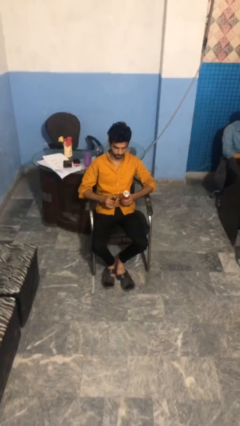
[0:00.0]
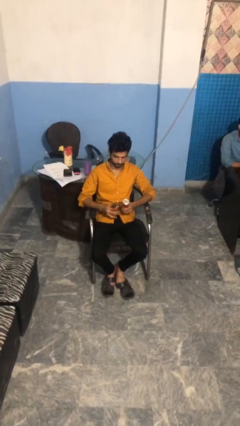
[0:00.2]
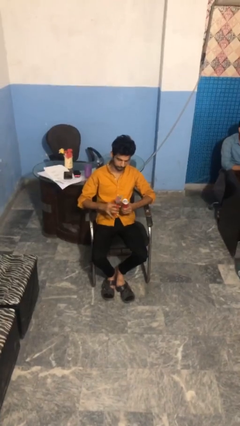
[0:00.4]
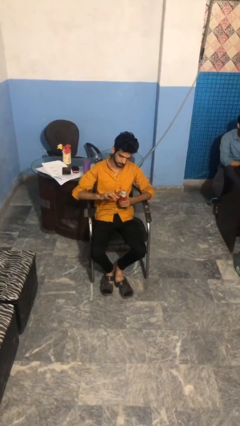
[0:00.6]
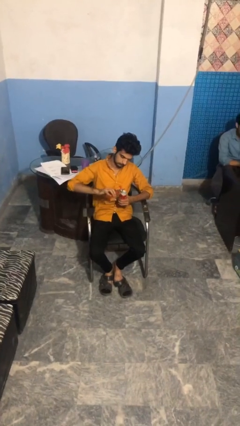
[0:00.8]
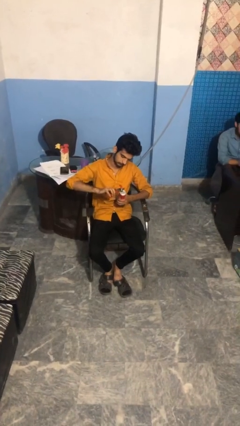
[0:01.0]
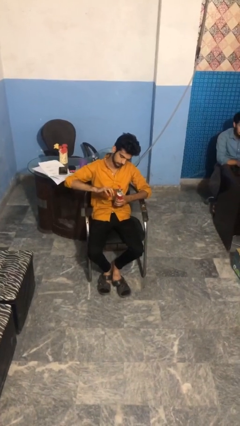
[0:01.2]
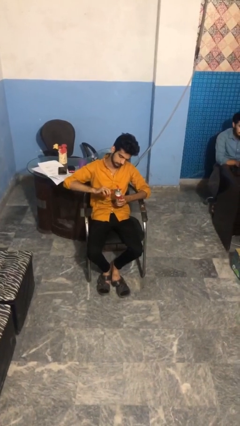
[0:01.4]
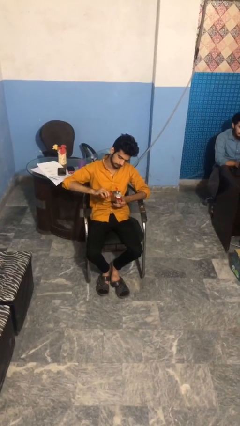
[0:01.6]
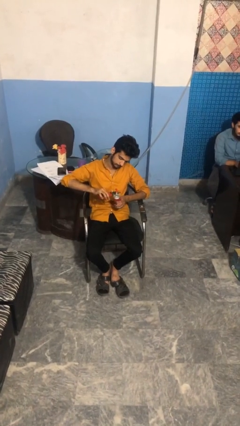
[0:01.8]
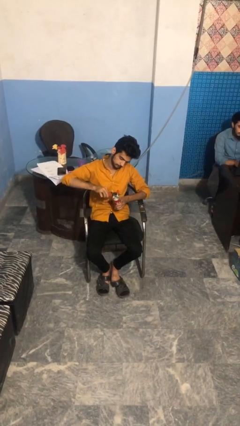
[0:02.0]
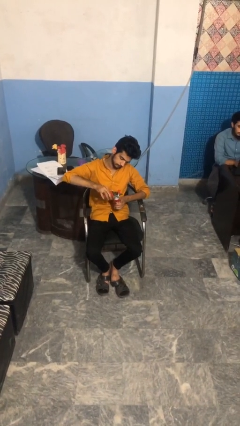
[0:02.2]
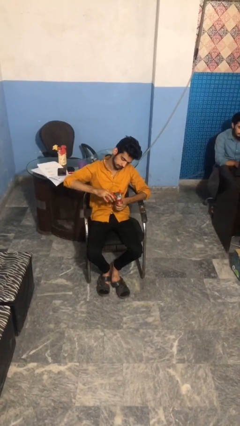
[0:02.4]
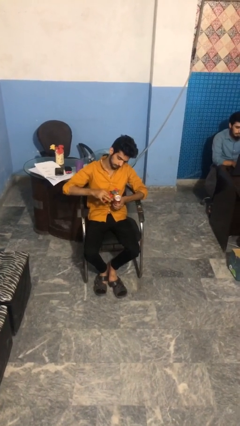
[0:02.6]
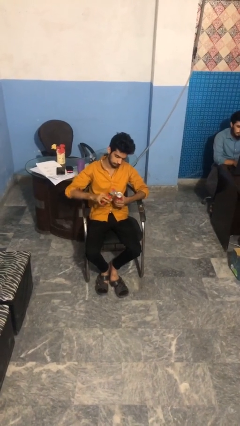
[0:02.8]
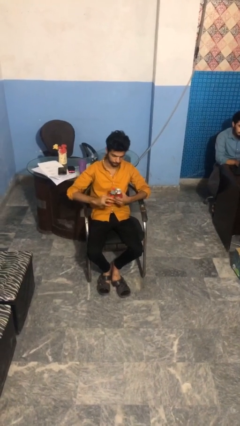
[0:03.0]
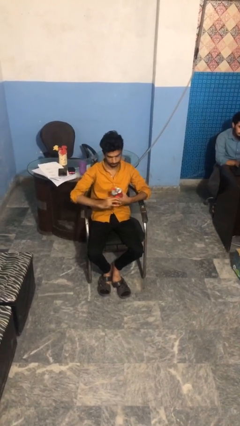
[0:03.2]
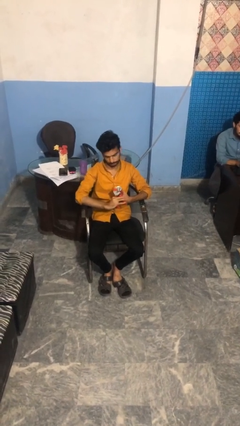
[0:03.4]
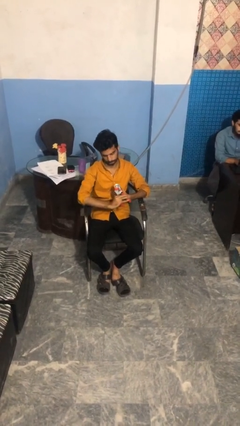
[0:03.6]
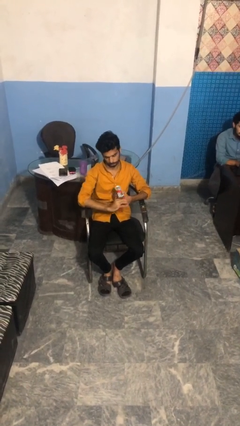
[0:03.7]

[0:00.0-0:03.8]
person opens can with can opener

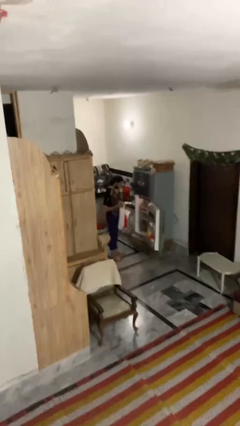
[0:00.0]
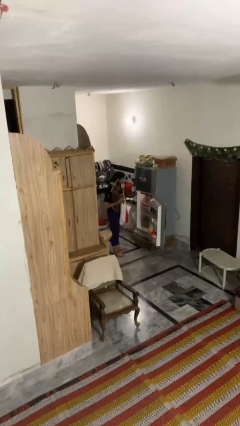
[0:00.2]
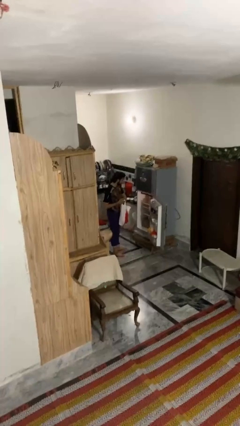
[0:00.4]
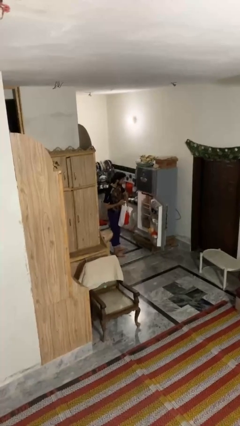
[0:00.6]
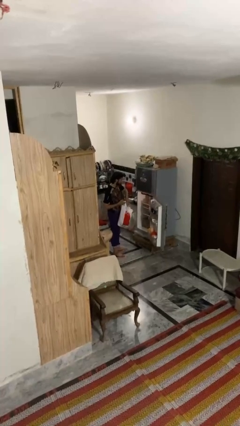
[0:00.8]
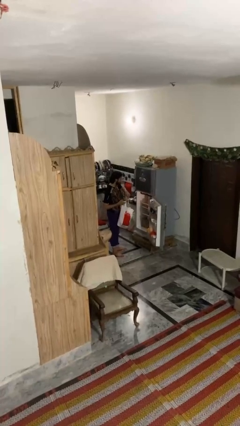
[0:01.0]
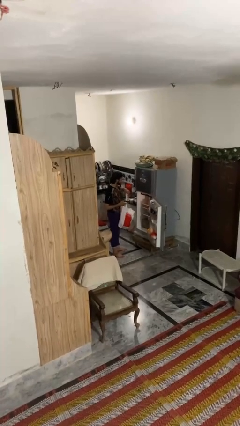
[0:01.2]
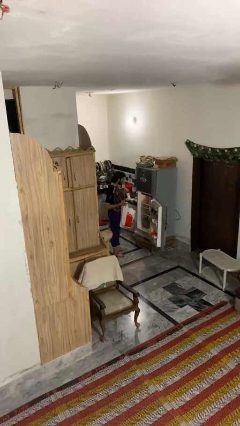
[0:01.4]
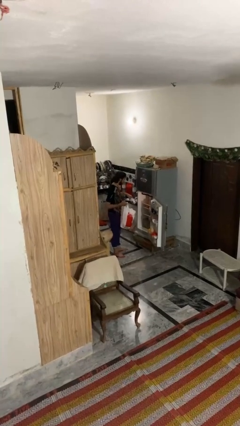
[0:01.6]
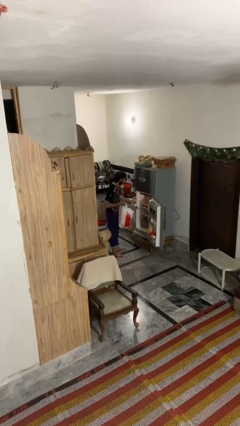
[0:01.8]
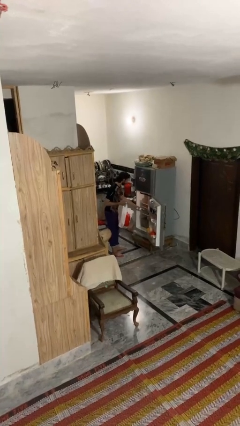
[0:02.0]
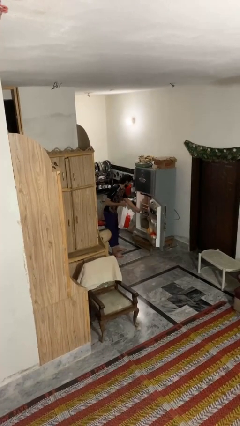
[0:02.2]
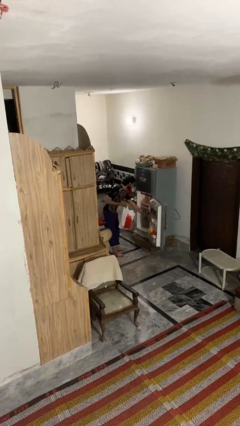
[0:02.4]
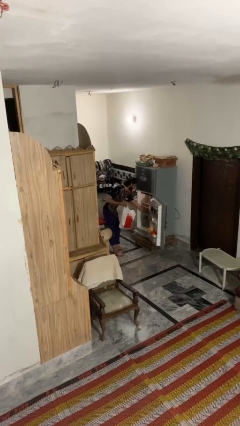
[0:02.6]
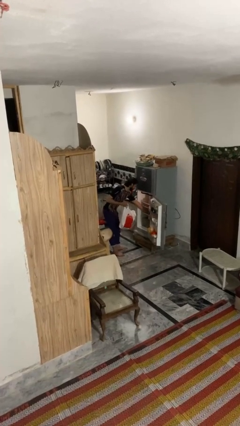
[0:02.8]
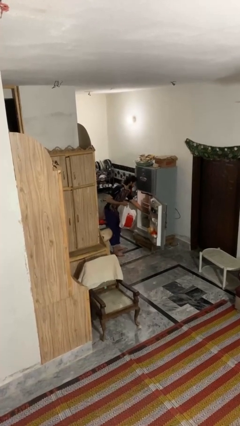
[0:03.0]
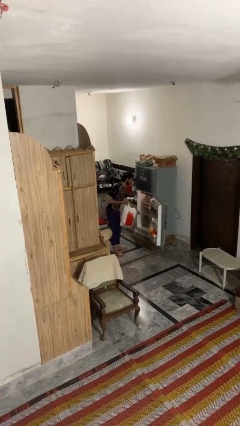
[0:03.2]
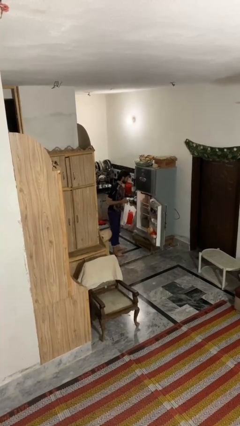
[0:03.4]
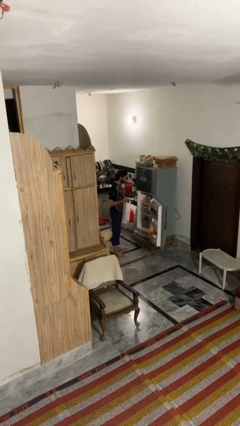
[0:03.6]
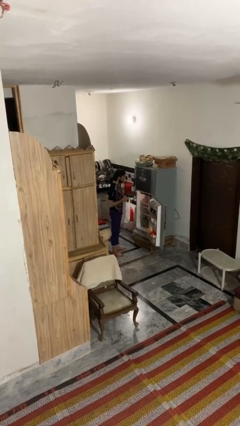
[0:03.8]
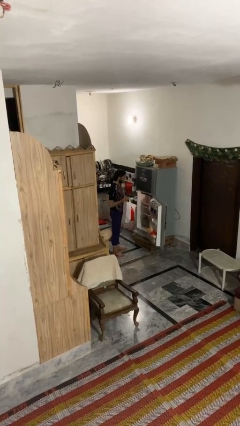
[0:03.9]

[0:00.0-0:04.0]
person loads groceries into refrigerator

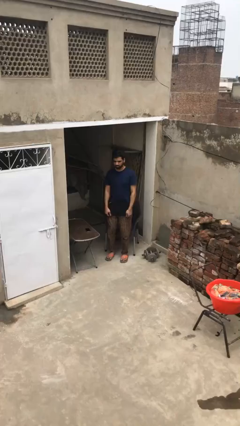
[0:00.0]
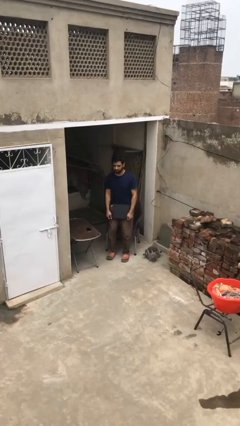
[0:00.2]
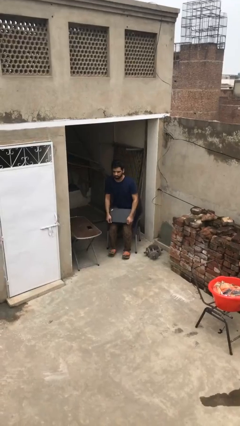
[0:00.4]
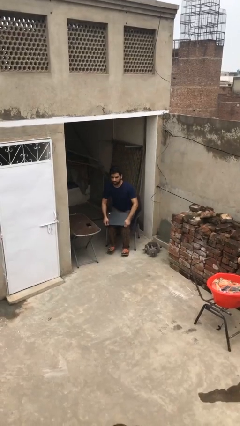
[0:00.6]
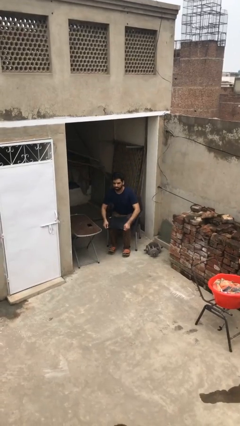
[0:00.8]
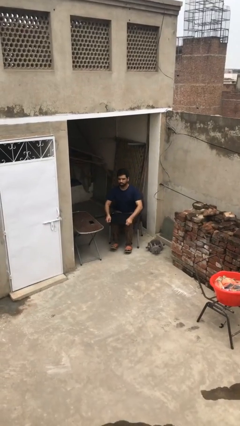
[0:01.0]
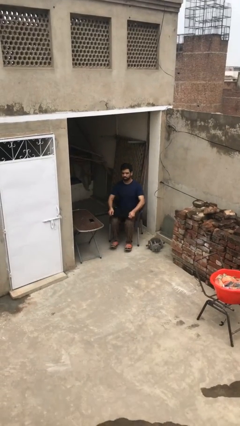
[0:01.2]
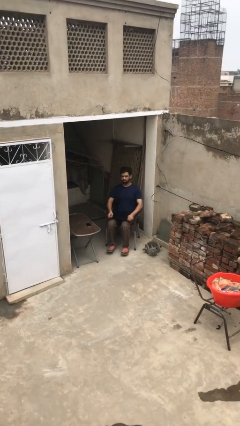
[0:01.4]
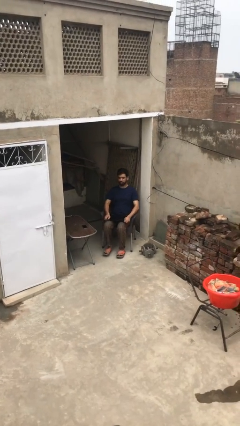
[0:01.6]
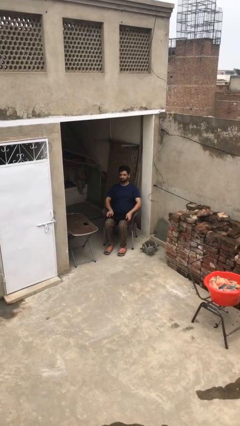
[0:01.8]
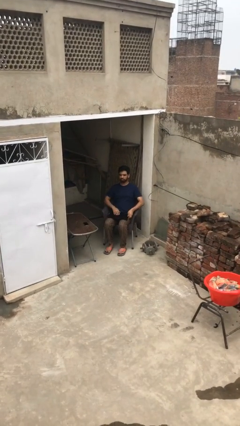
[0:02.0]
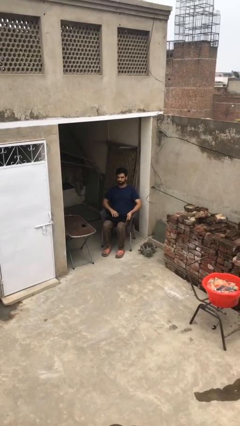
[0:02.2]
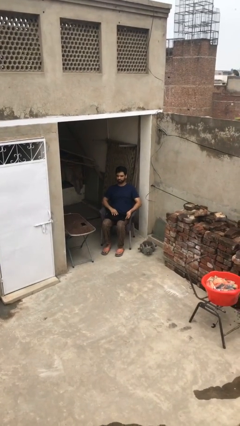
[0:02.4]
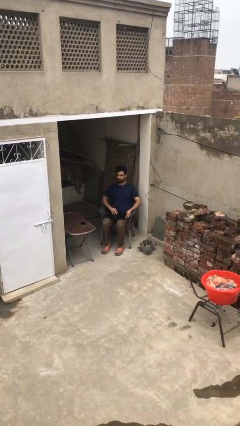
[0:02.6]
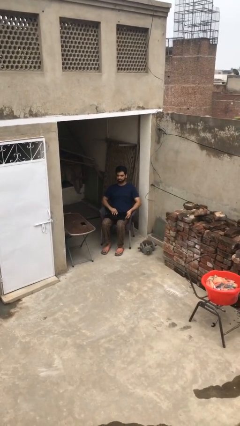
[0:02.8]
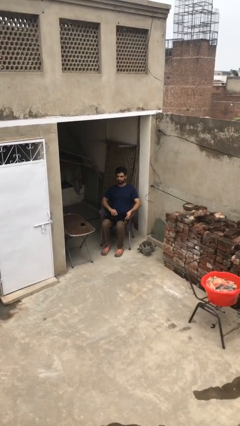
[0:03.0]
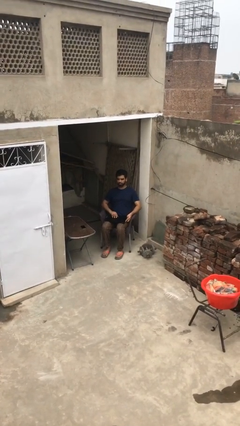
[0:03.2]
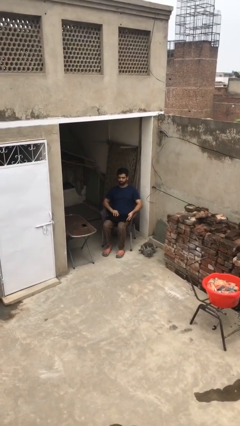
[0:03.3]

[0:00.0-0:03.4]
person sits down

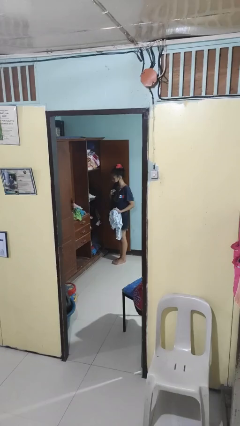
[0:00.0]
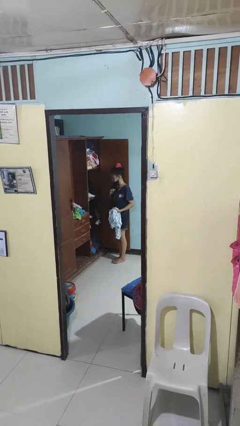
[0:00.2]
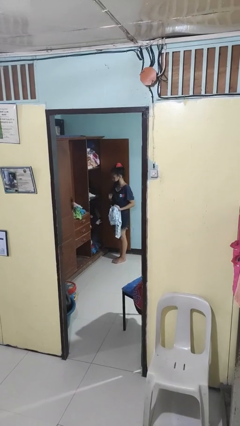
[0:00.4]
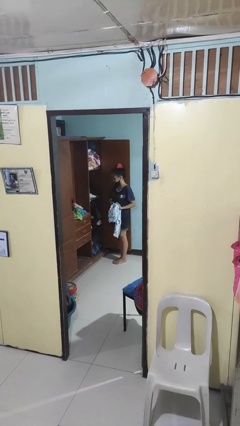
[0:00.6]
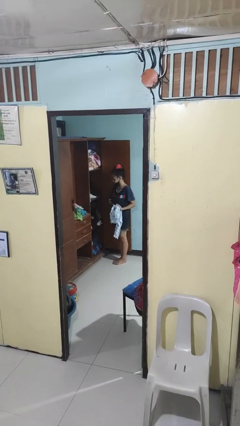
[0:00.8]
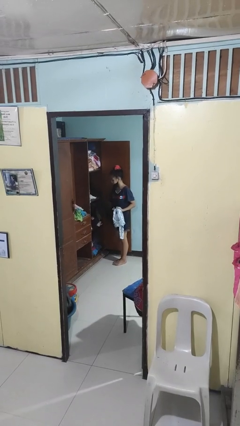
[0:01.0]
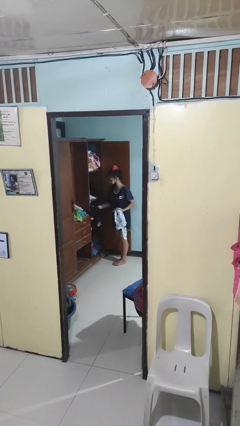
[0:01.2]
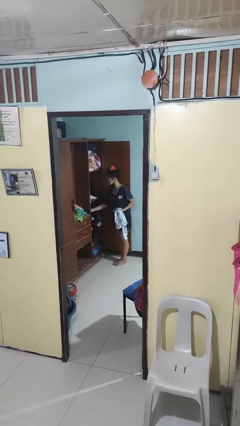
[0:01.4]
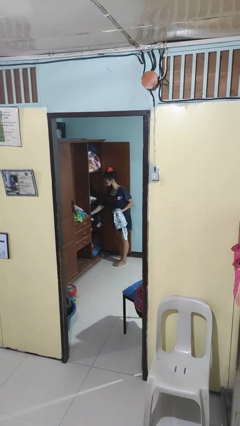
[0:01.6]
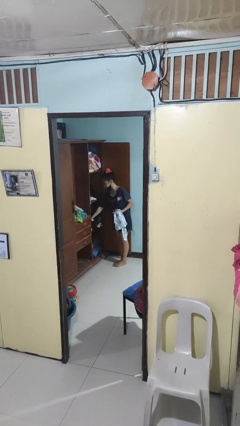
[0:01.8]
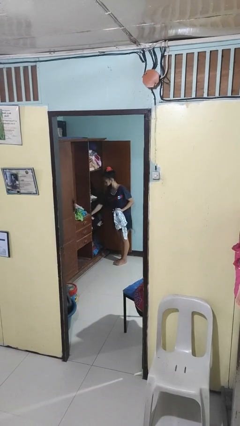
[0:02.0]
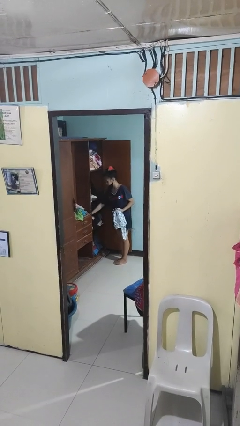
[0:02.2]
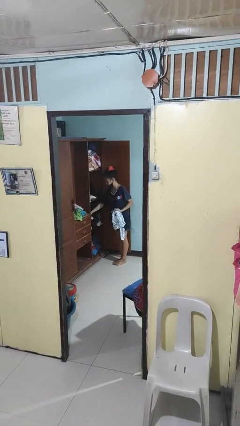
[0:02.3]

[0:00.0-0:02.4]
person puts clothes into dresser

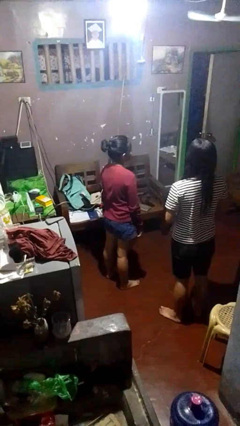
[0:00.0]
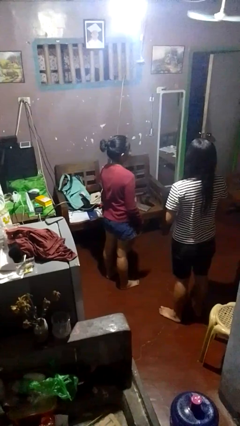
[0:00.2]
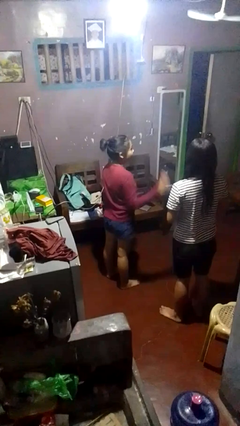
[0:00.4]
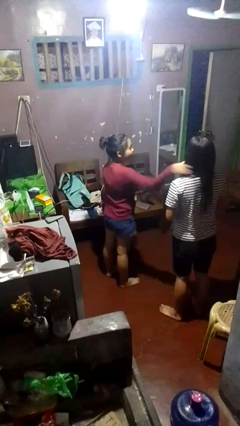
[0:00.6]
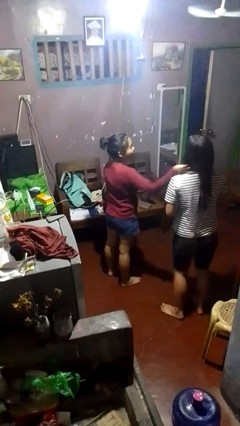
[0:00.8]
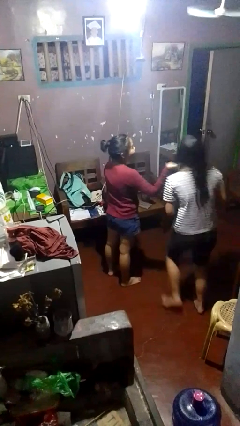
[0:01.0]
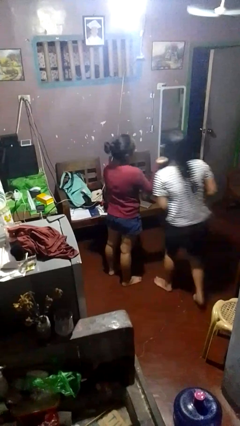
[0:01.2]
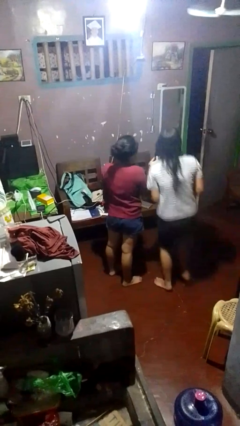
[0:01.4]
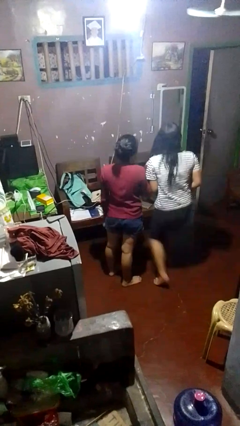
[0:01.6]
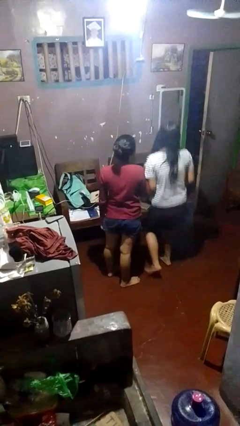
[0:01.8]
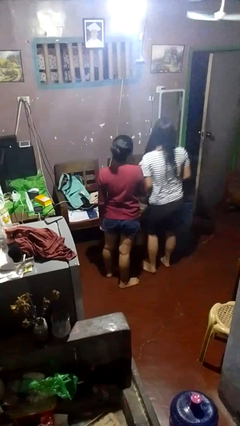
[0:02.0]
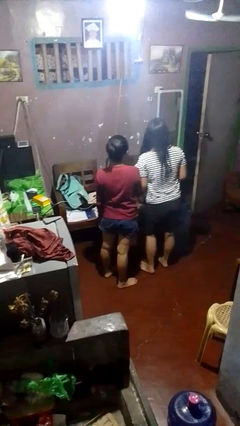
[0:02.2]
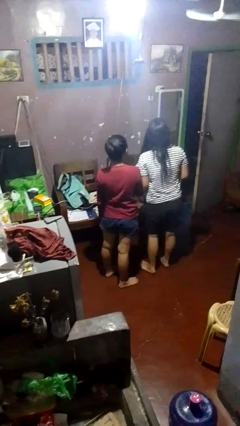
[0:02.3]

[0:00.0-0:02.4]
person grabs person by hair

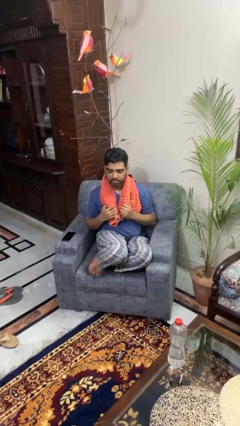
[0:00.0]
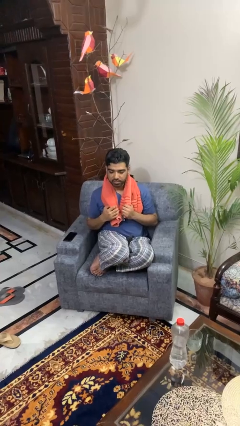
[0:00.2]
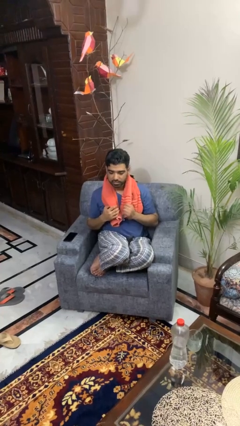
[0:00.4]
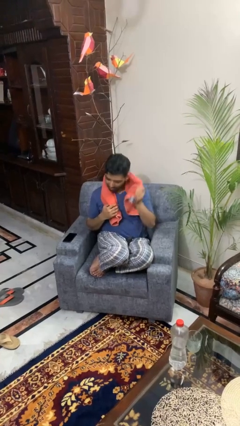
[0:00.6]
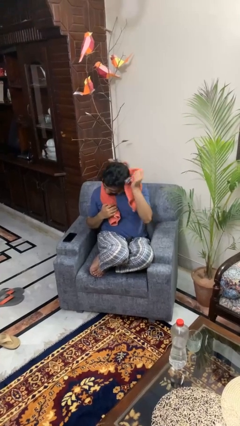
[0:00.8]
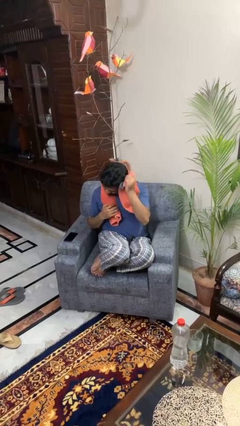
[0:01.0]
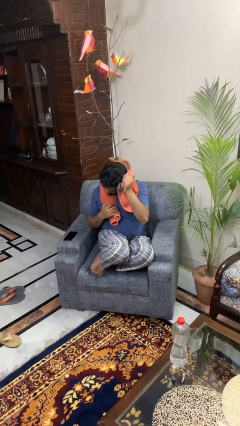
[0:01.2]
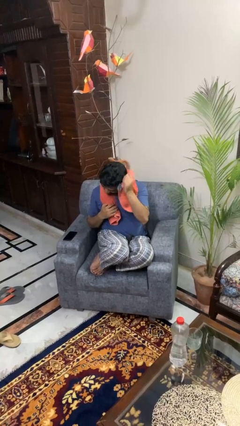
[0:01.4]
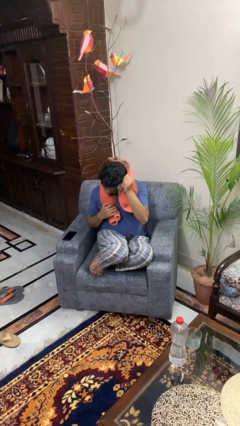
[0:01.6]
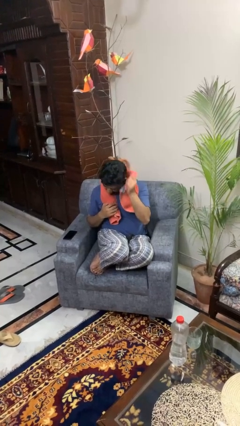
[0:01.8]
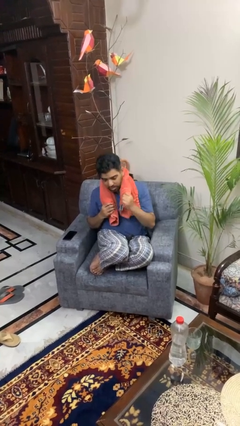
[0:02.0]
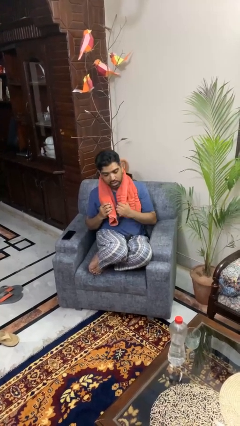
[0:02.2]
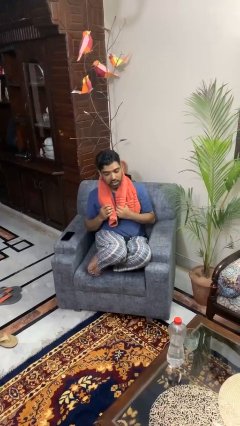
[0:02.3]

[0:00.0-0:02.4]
person dries hair with towel
